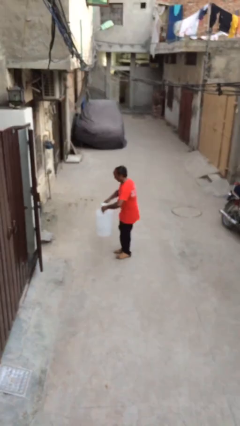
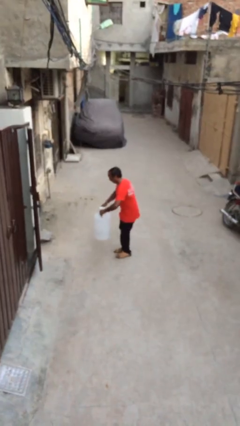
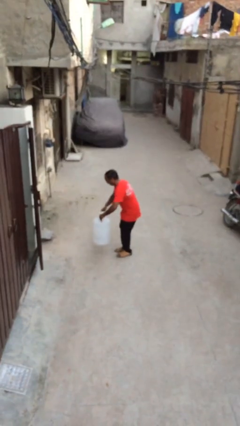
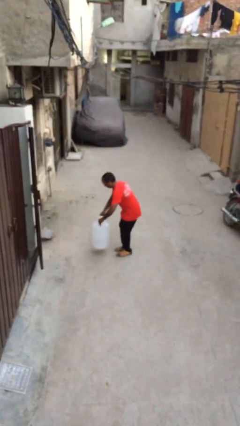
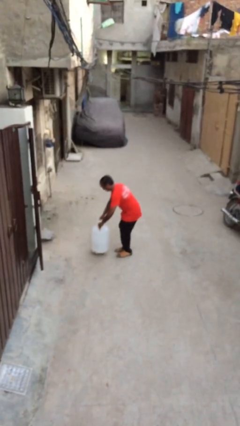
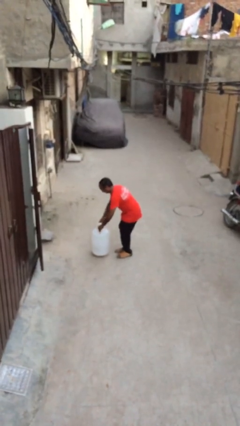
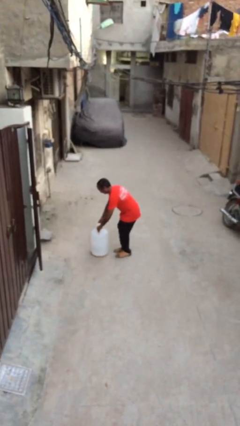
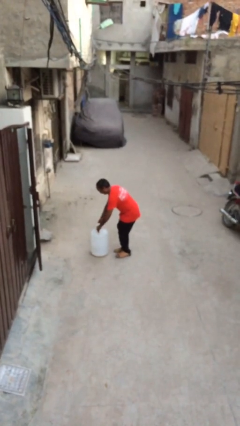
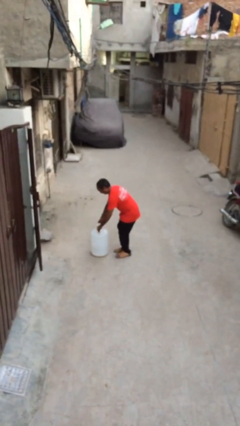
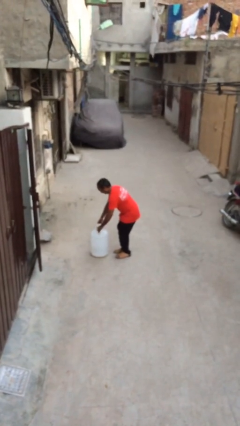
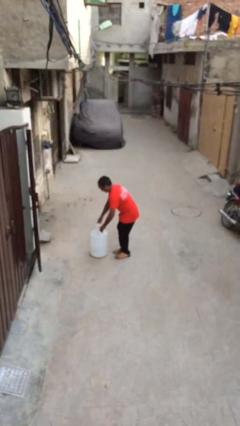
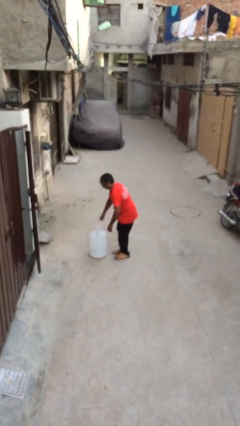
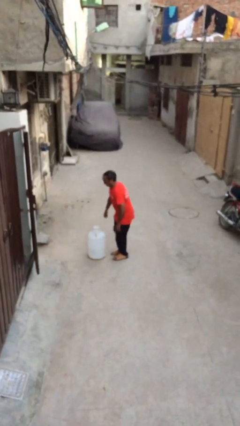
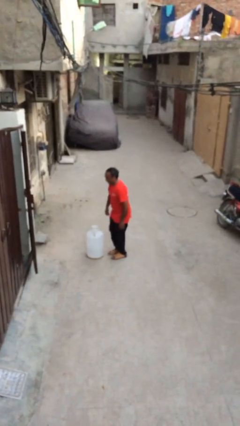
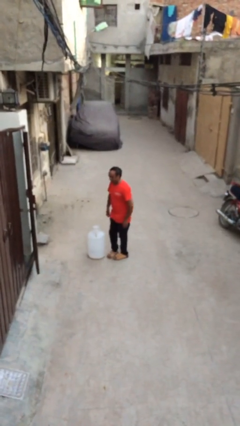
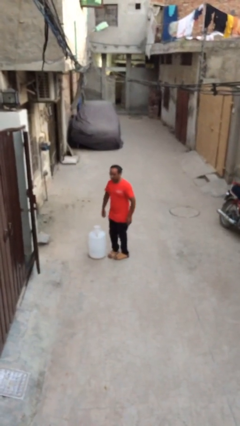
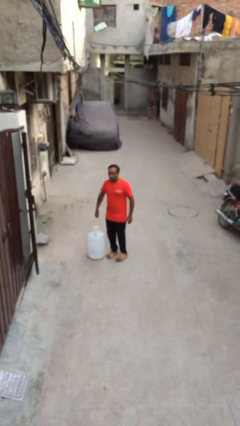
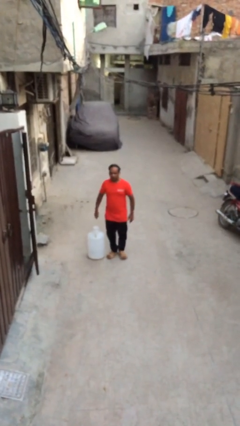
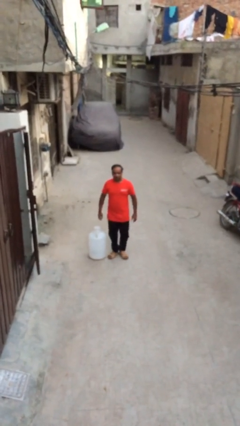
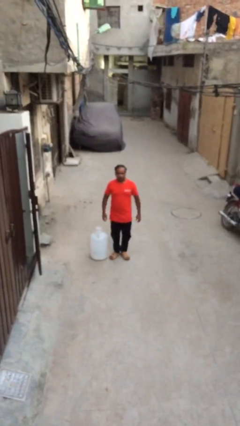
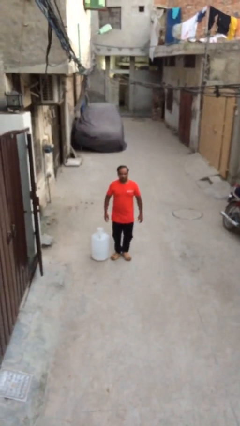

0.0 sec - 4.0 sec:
person puts down object on floor

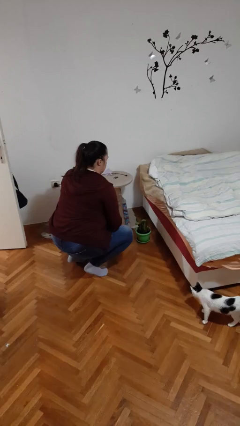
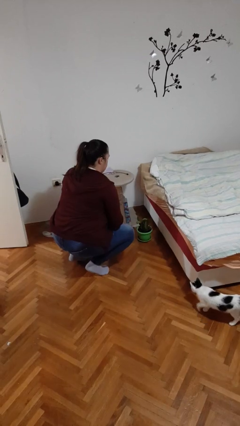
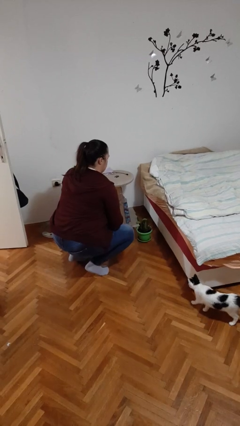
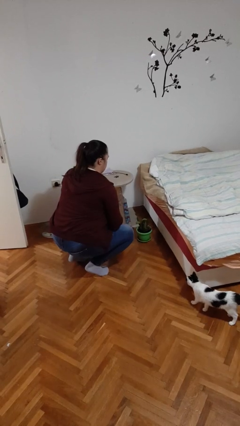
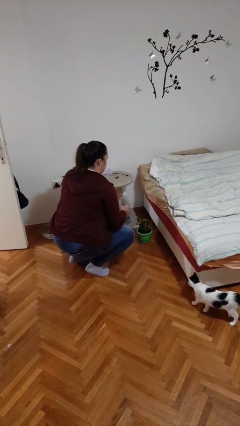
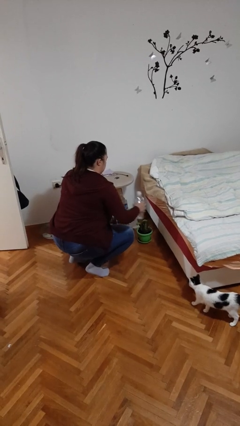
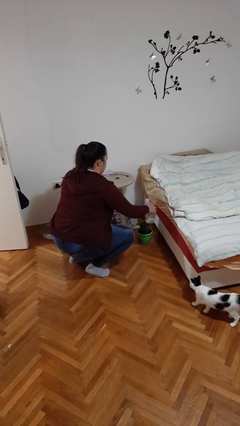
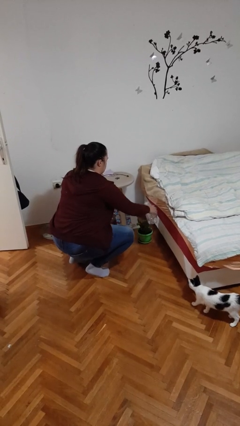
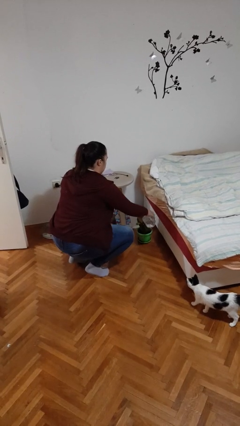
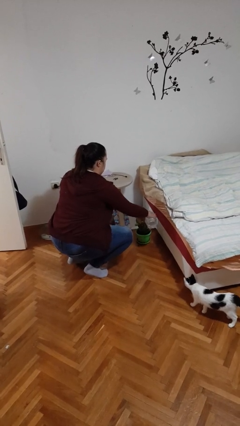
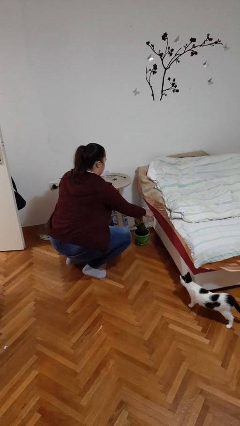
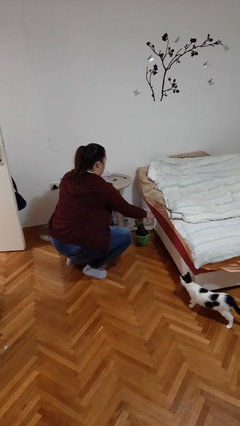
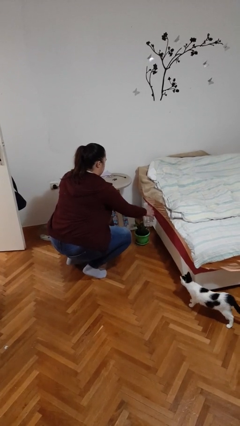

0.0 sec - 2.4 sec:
person waters houseplant

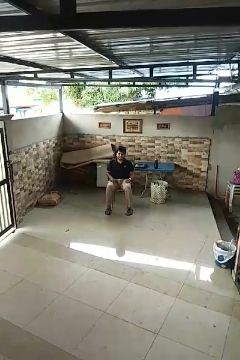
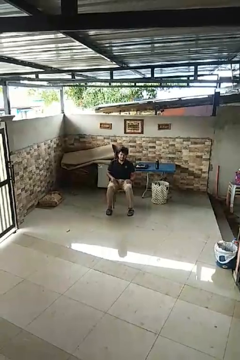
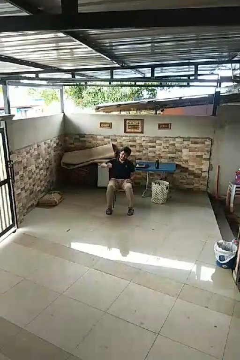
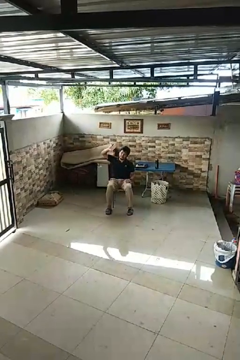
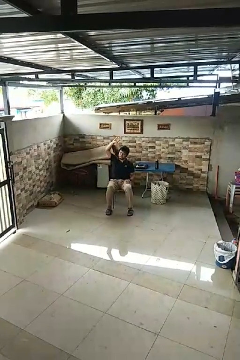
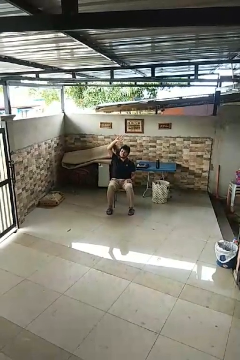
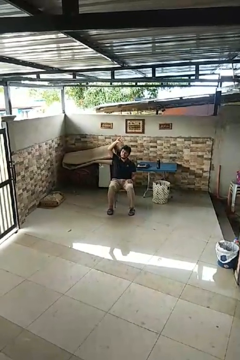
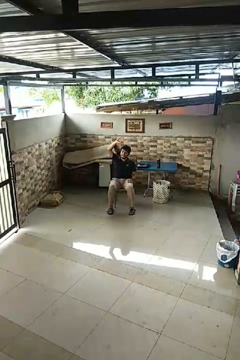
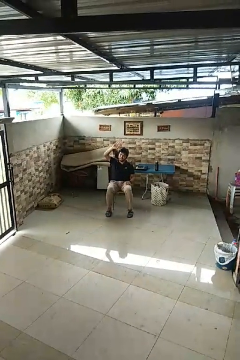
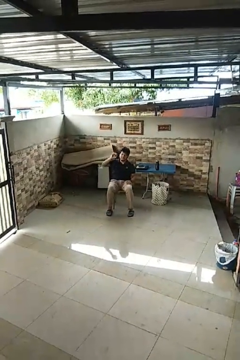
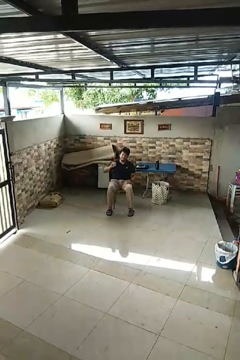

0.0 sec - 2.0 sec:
person gestures raise hand

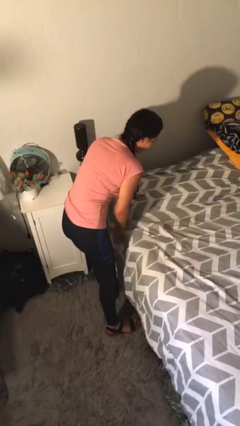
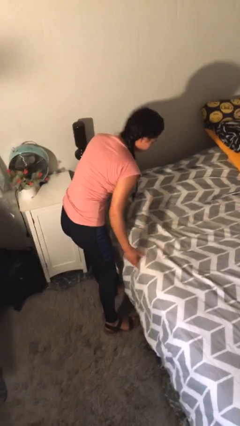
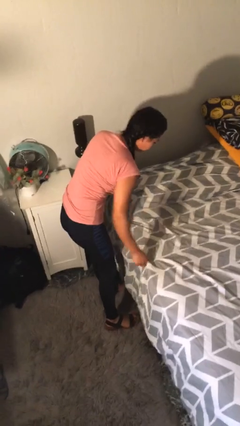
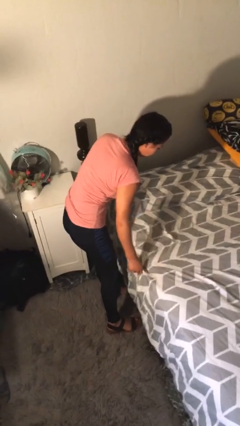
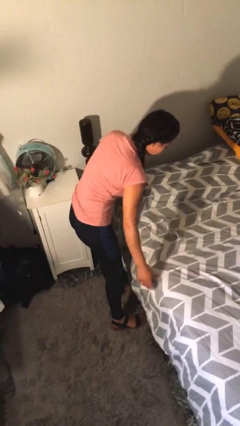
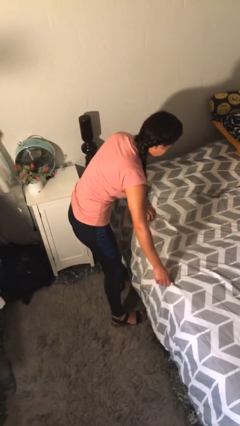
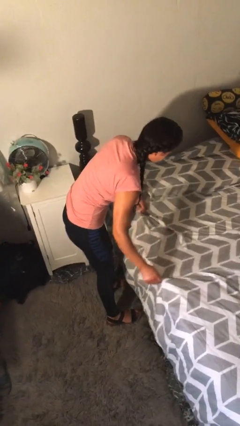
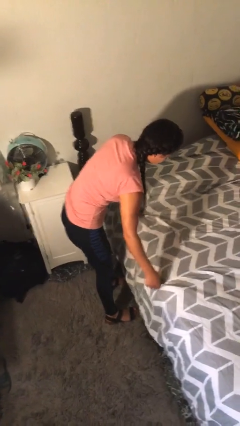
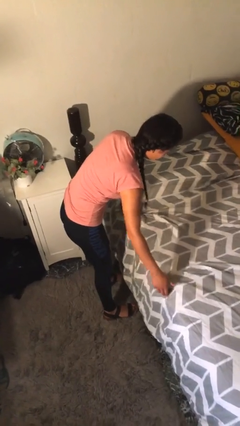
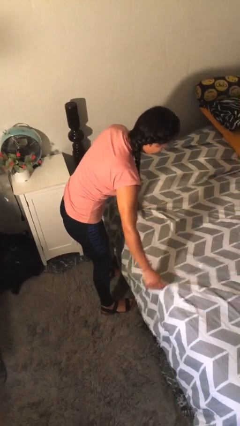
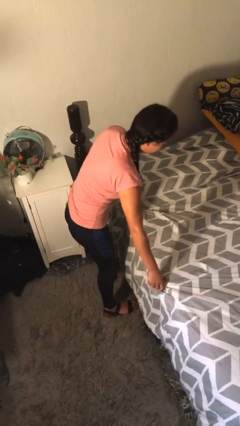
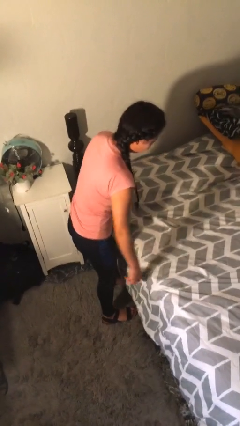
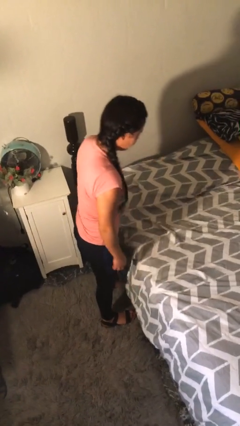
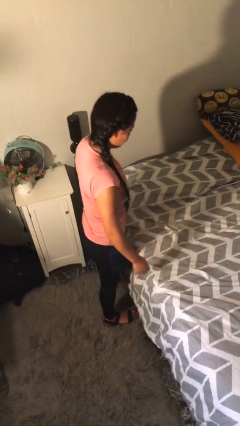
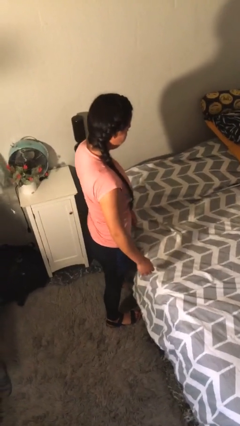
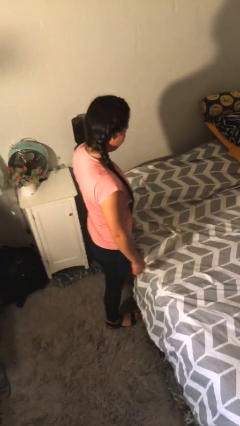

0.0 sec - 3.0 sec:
person makes bed

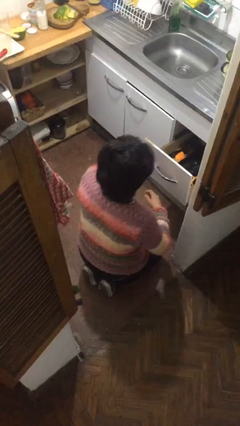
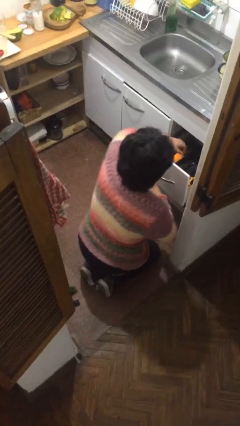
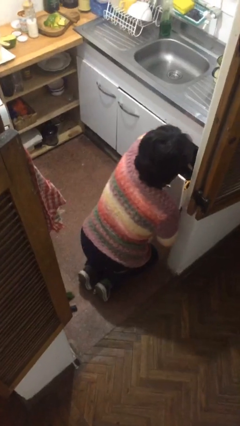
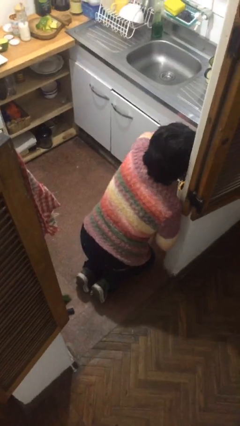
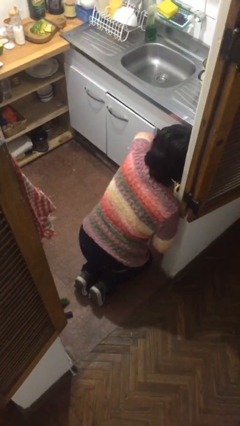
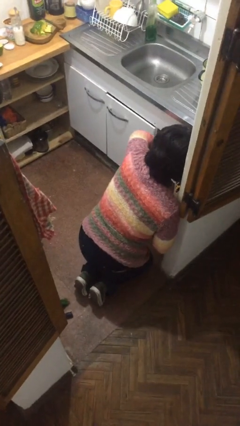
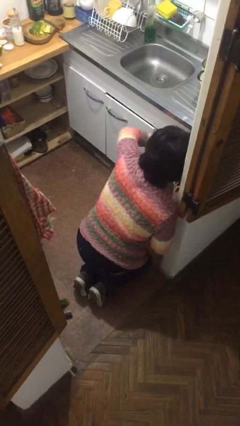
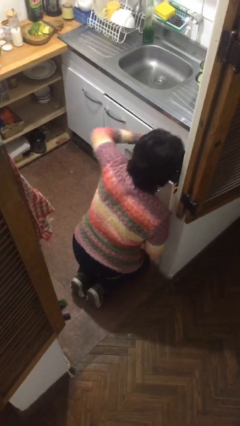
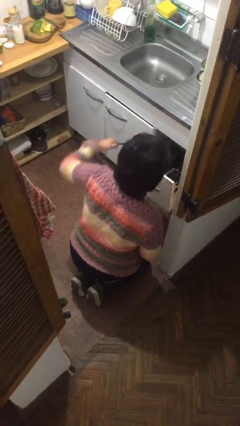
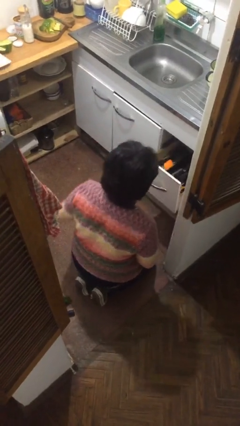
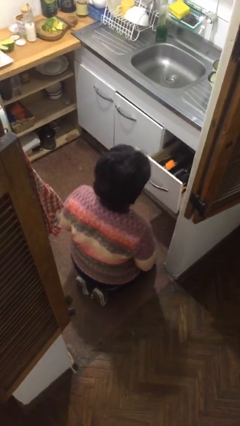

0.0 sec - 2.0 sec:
person takes object from kitchen drawer

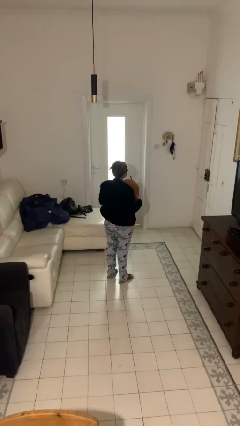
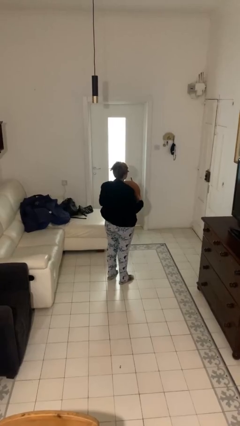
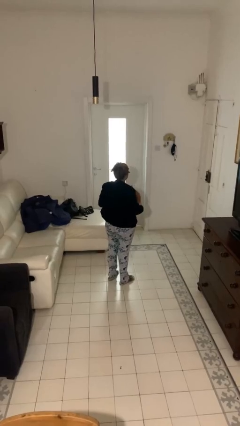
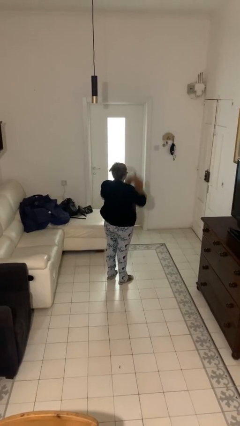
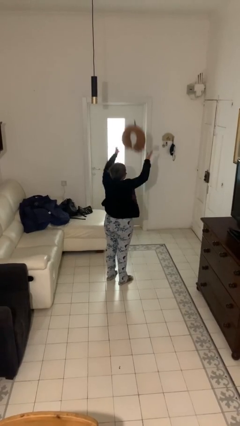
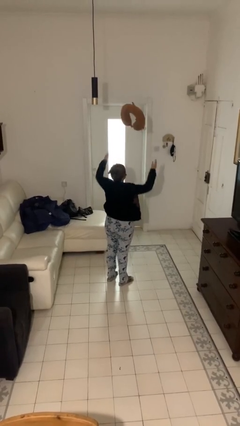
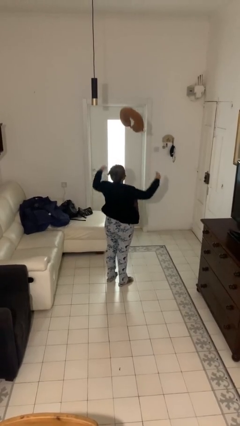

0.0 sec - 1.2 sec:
person drops object

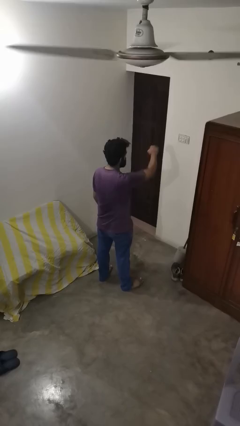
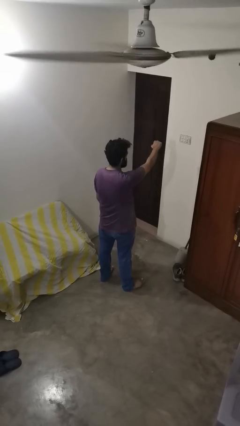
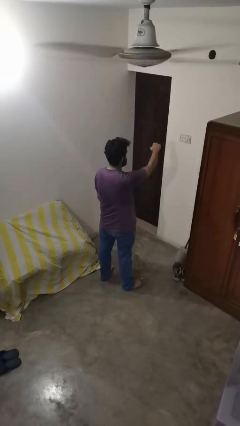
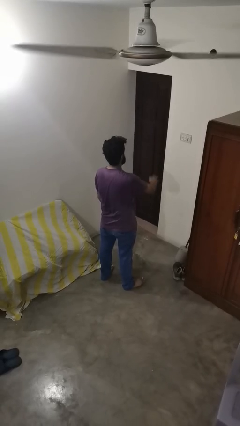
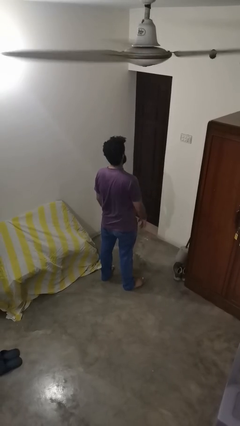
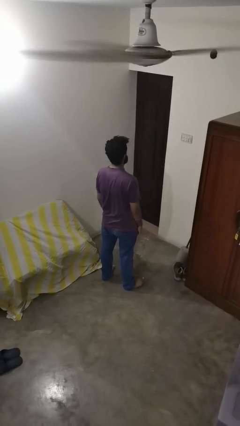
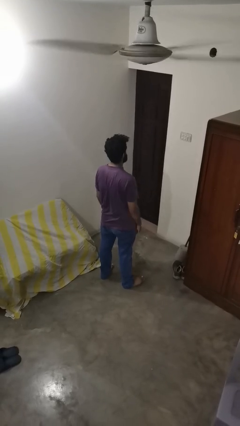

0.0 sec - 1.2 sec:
person punches

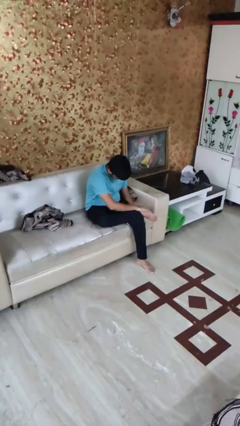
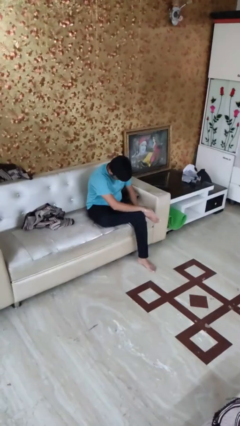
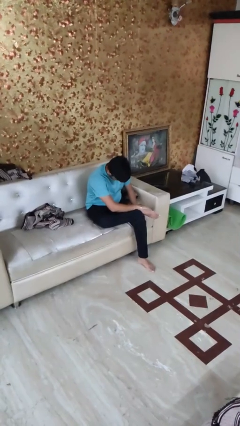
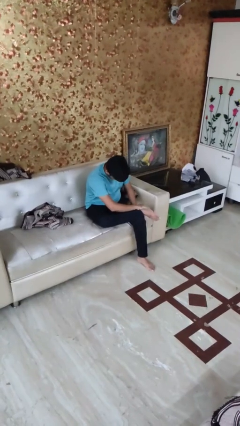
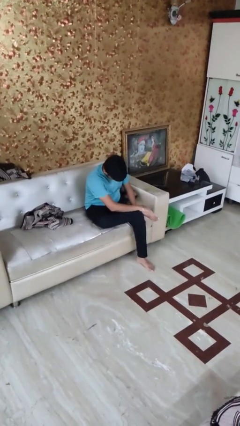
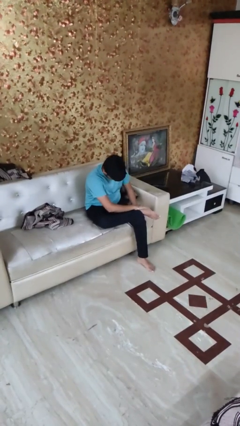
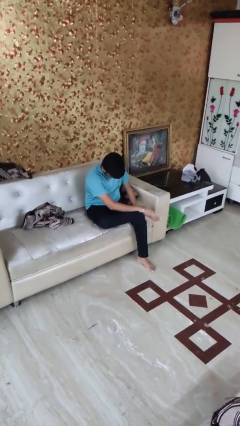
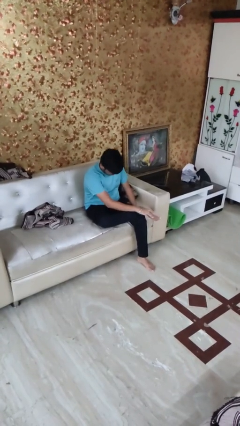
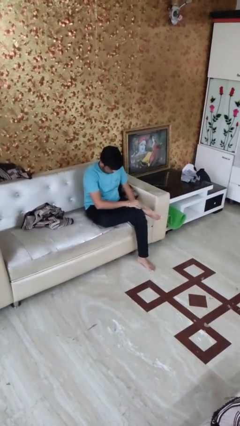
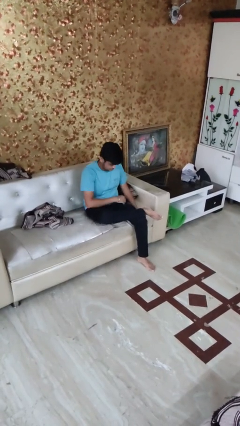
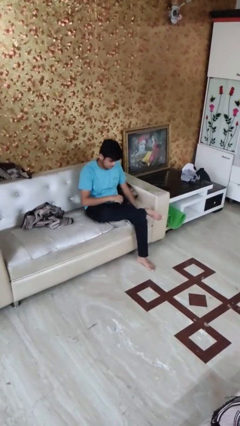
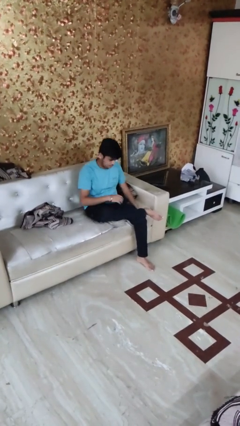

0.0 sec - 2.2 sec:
person rubs foot
